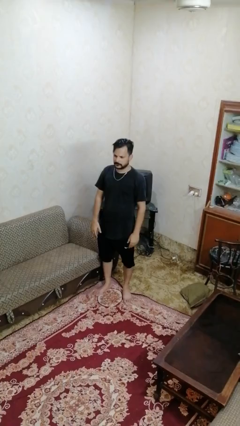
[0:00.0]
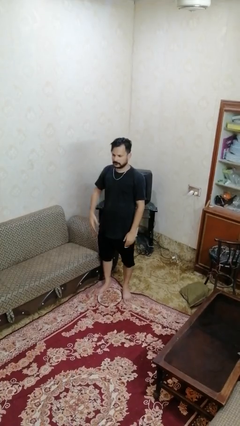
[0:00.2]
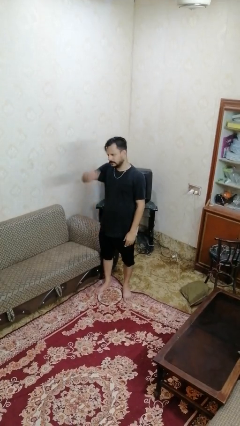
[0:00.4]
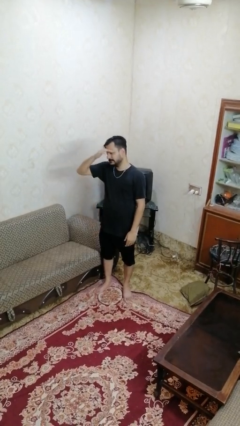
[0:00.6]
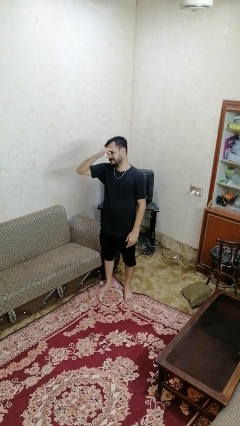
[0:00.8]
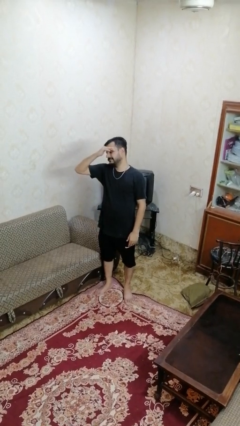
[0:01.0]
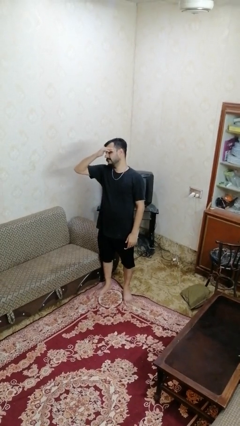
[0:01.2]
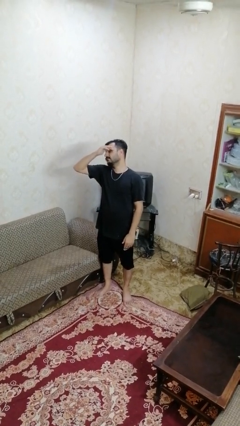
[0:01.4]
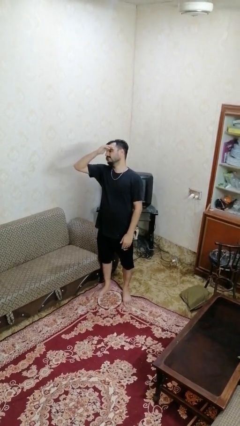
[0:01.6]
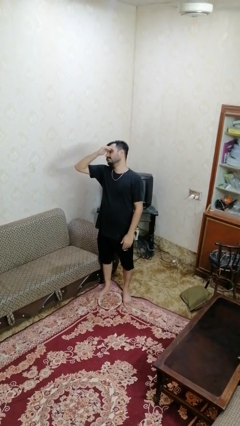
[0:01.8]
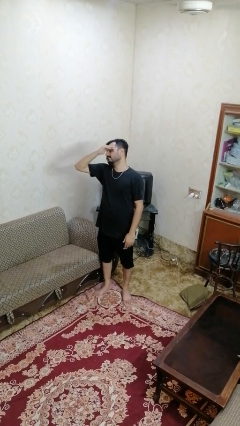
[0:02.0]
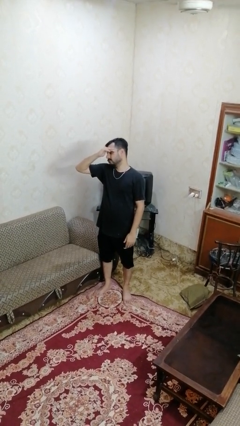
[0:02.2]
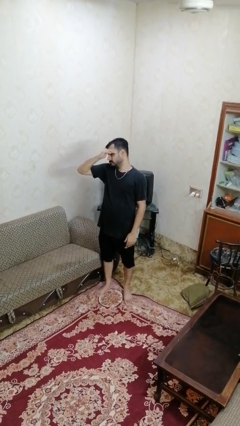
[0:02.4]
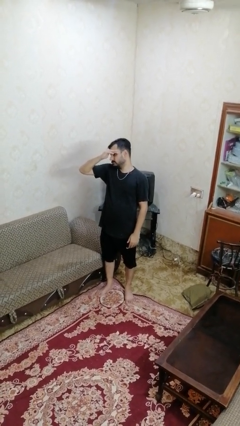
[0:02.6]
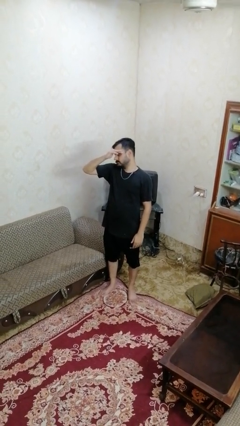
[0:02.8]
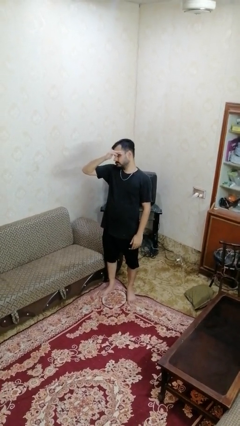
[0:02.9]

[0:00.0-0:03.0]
person shades eyes

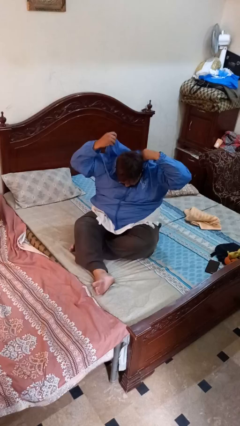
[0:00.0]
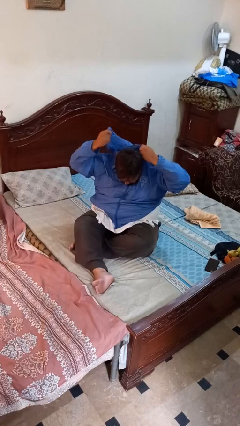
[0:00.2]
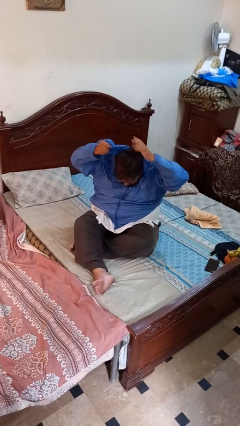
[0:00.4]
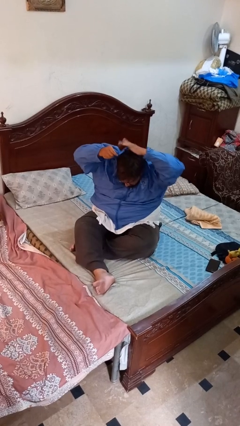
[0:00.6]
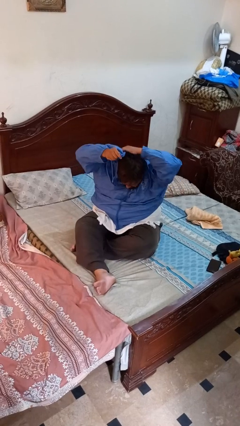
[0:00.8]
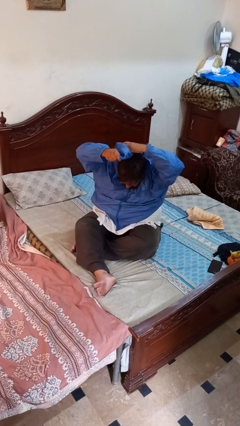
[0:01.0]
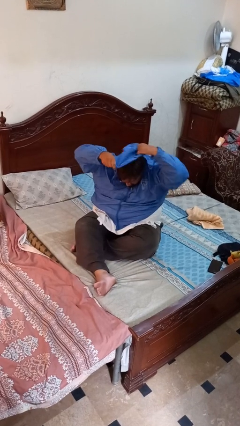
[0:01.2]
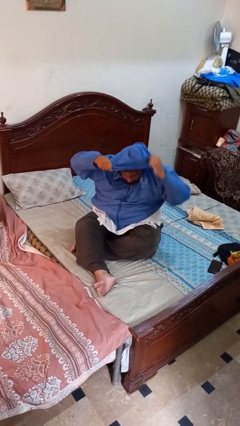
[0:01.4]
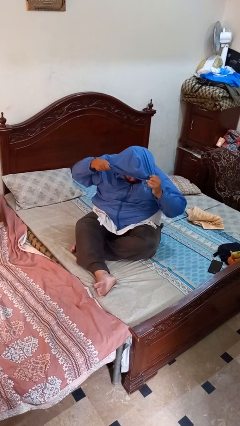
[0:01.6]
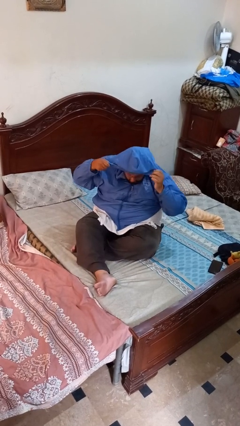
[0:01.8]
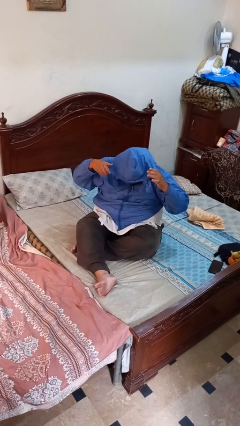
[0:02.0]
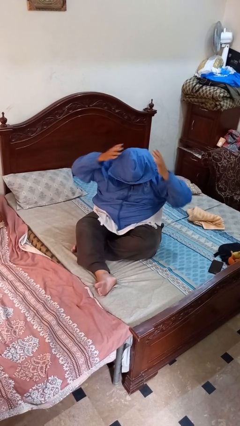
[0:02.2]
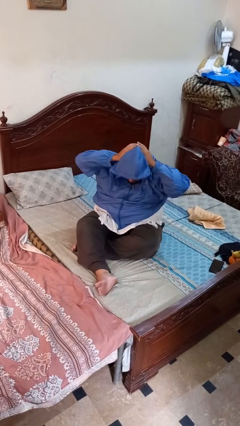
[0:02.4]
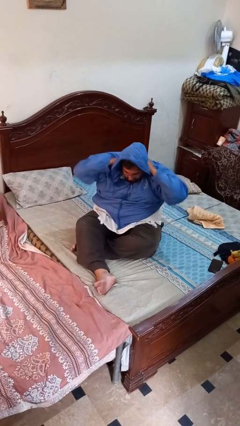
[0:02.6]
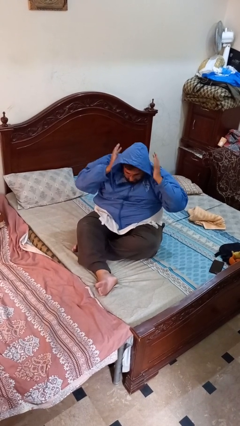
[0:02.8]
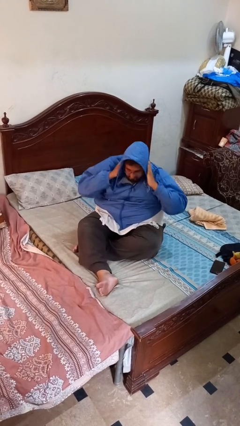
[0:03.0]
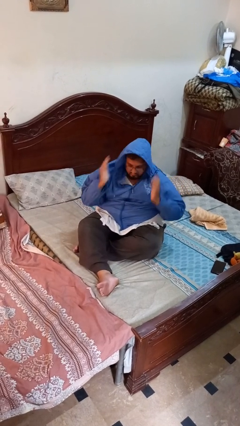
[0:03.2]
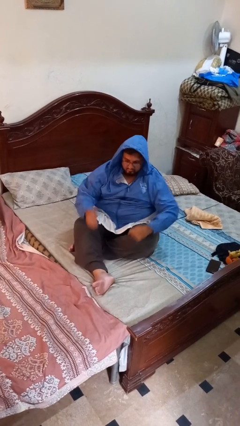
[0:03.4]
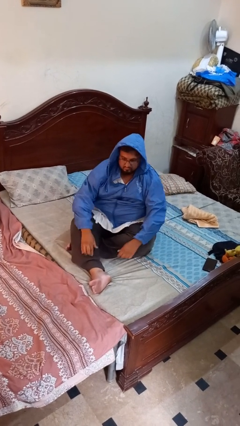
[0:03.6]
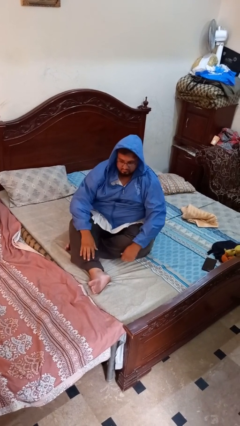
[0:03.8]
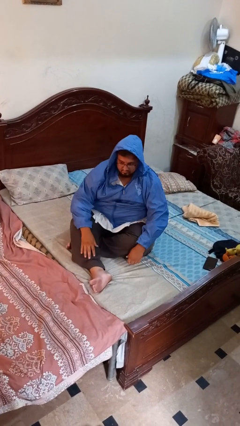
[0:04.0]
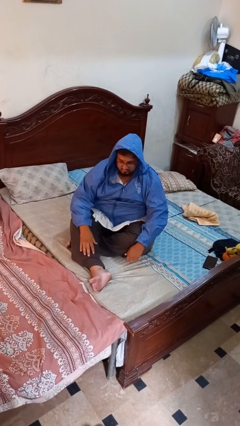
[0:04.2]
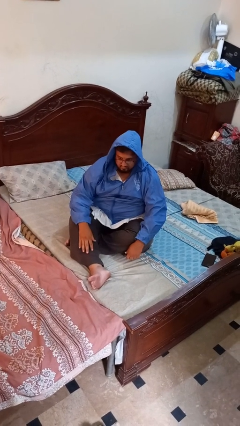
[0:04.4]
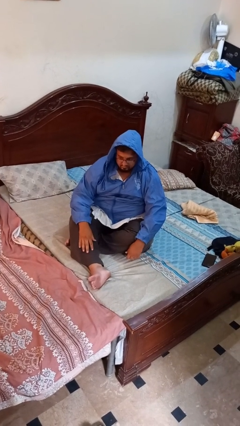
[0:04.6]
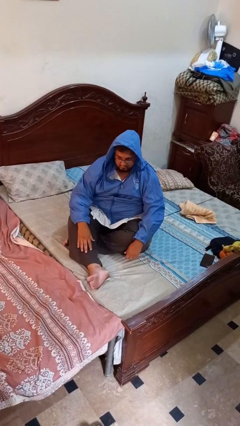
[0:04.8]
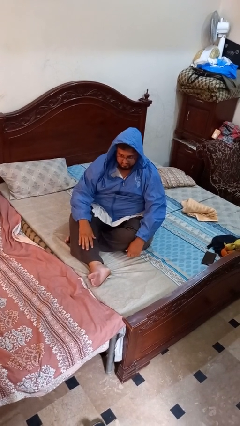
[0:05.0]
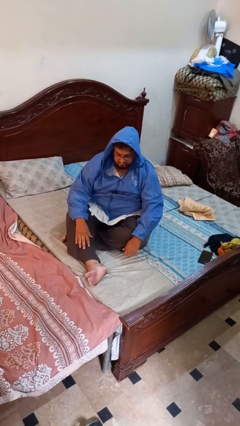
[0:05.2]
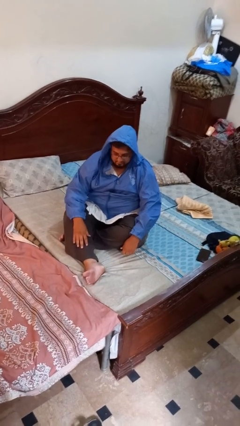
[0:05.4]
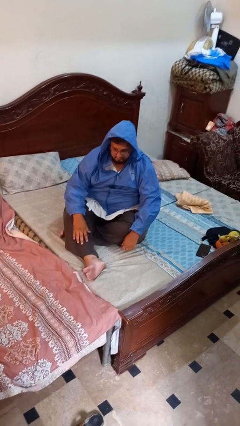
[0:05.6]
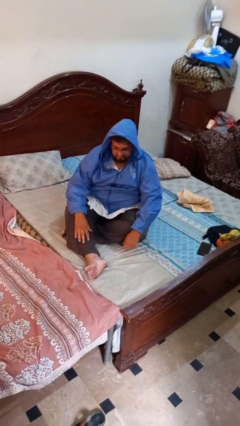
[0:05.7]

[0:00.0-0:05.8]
person puts on hoodie

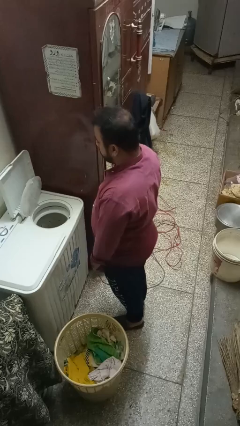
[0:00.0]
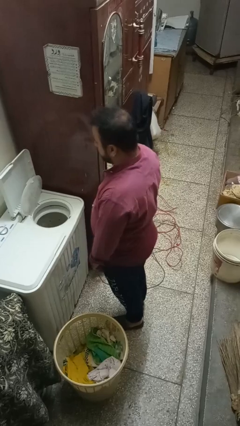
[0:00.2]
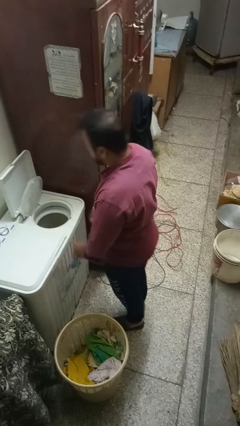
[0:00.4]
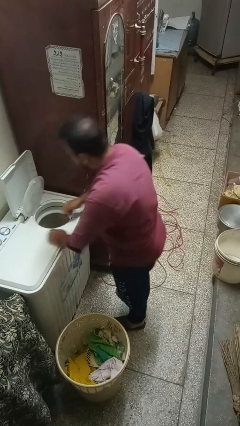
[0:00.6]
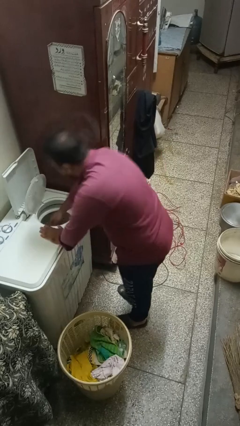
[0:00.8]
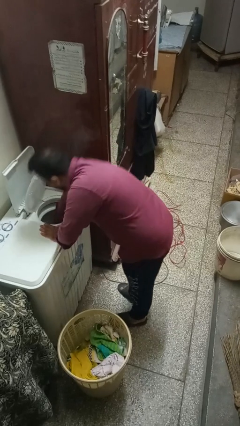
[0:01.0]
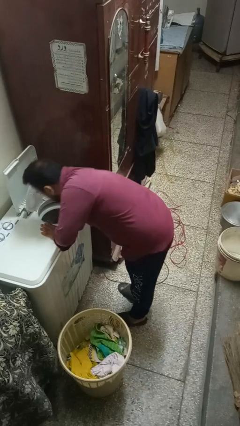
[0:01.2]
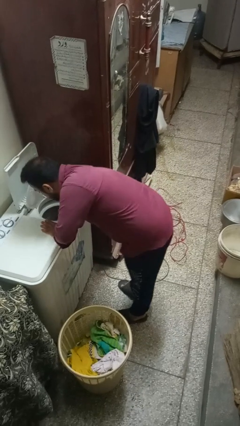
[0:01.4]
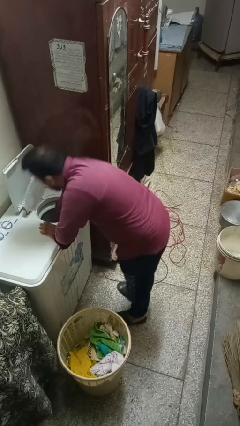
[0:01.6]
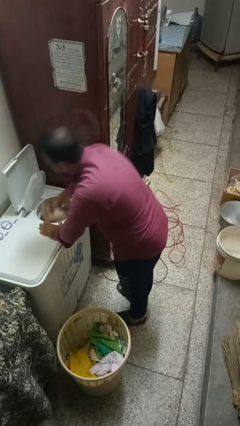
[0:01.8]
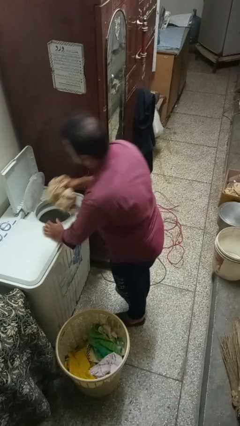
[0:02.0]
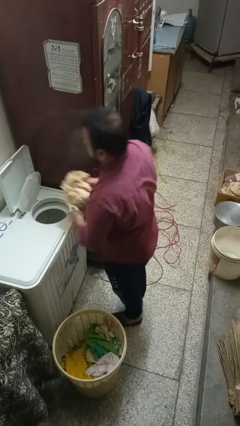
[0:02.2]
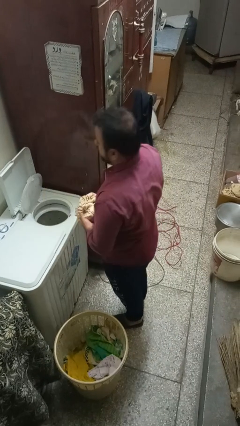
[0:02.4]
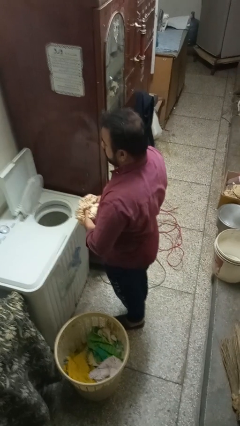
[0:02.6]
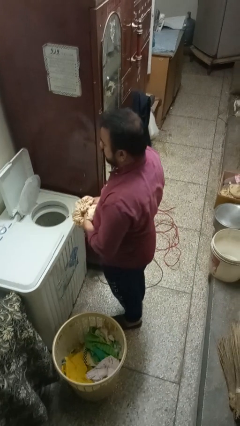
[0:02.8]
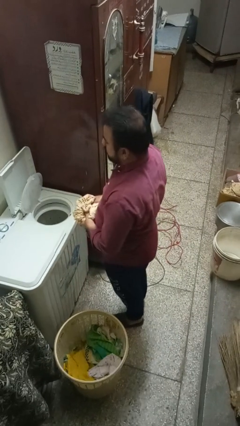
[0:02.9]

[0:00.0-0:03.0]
person unloads dryer

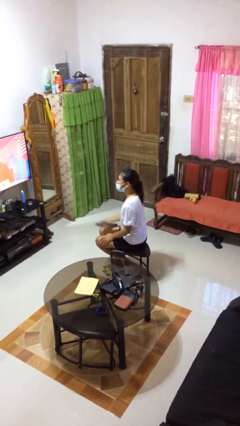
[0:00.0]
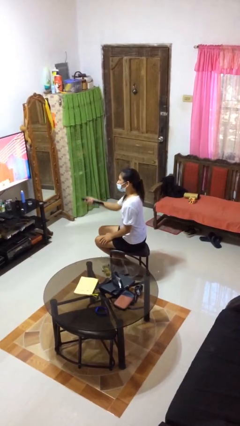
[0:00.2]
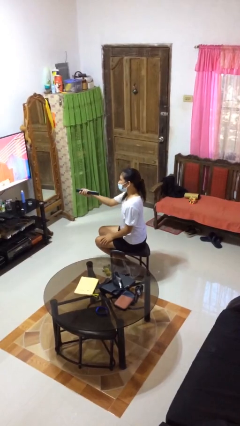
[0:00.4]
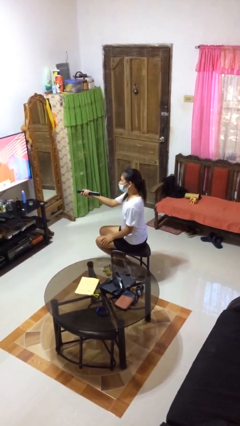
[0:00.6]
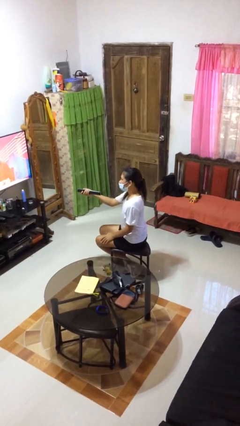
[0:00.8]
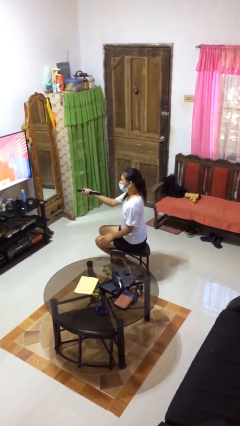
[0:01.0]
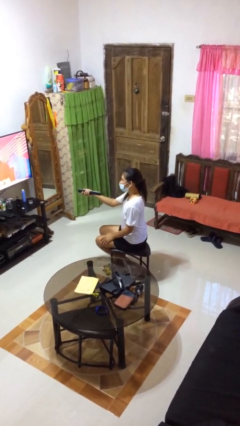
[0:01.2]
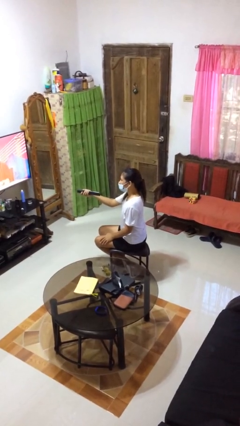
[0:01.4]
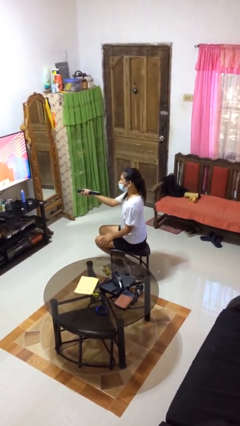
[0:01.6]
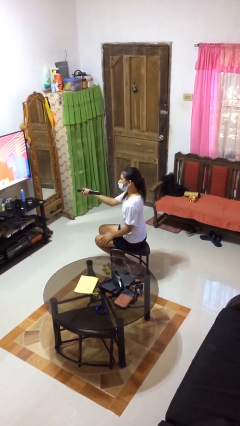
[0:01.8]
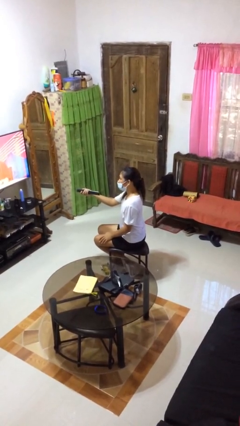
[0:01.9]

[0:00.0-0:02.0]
person uses television remote

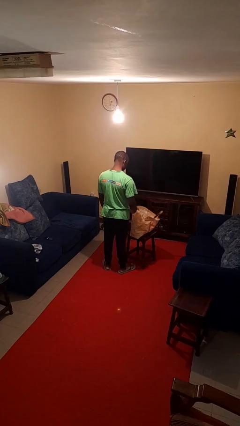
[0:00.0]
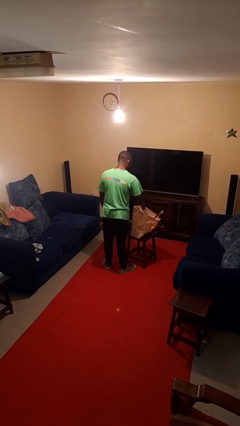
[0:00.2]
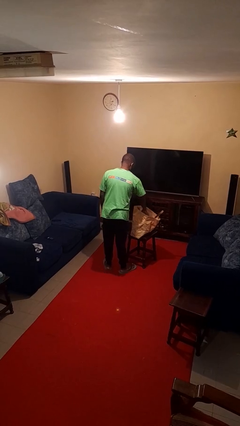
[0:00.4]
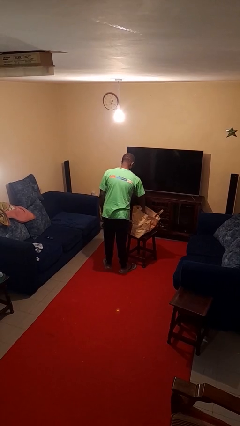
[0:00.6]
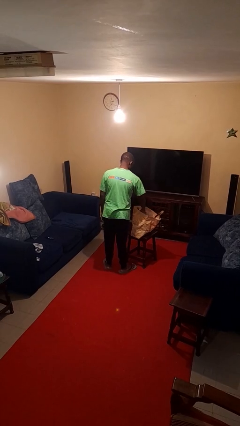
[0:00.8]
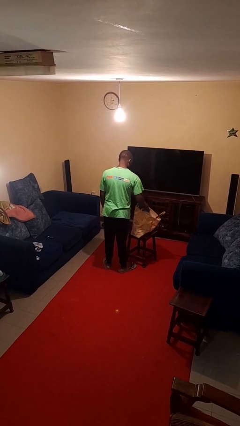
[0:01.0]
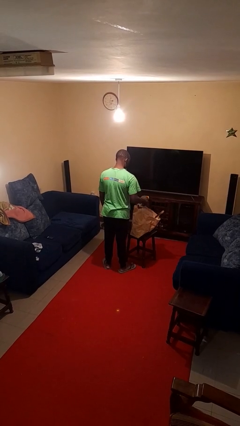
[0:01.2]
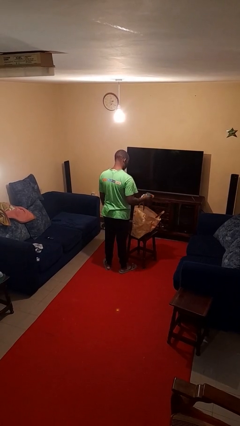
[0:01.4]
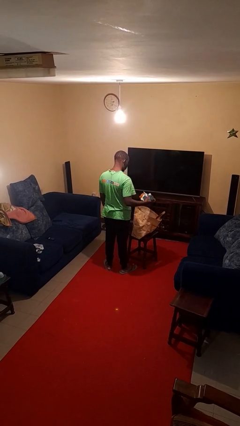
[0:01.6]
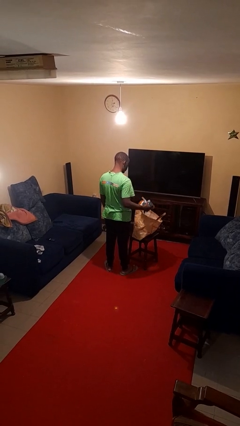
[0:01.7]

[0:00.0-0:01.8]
person takes object from bag

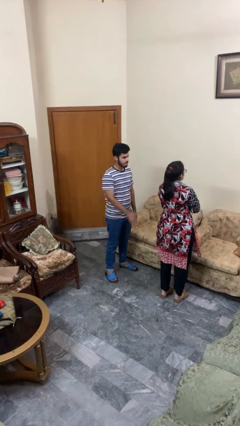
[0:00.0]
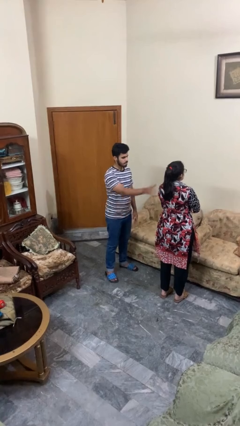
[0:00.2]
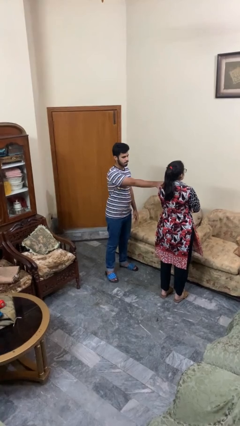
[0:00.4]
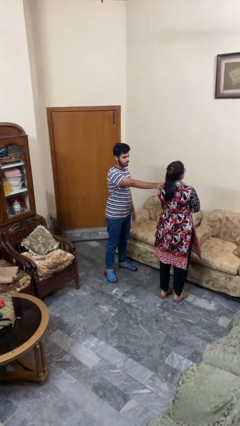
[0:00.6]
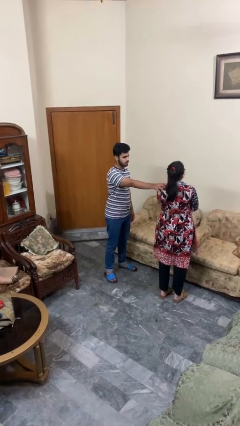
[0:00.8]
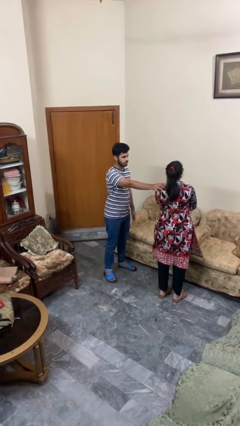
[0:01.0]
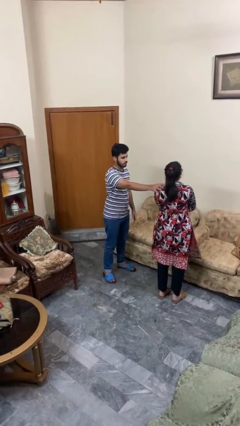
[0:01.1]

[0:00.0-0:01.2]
person grabs person by shoulder

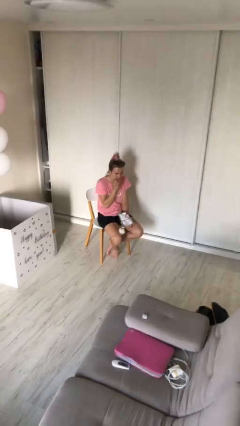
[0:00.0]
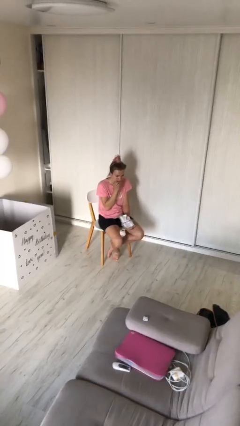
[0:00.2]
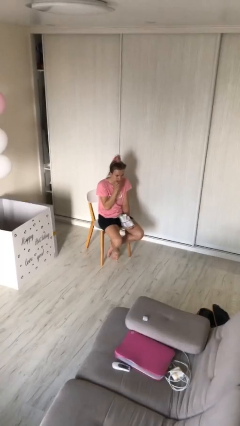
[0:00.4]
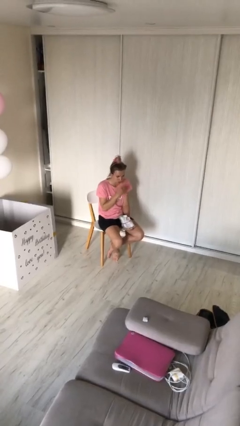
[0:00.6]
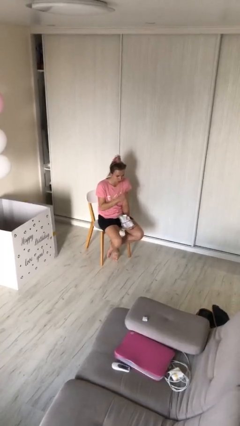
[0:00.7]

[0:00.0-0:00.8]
person eats snack from bag
